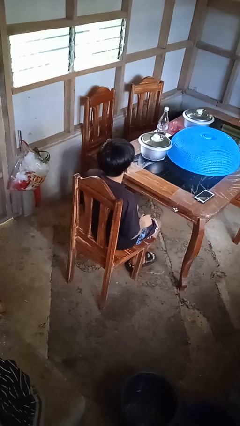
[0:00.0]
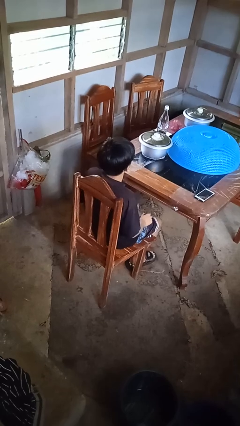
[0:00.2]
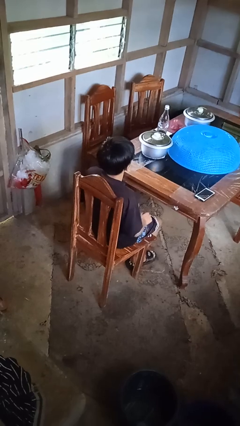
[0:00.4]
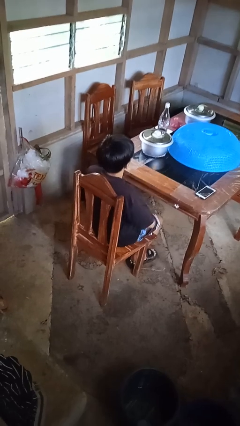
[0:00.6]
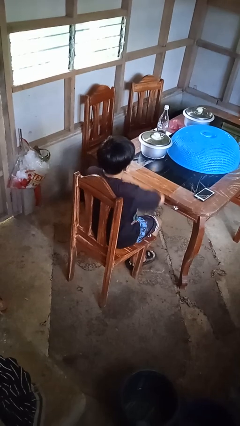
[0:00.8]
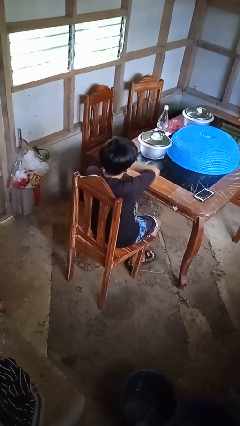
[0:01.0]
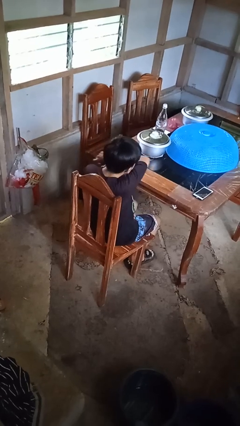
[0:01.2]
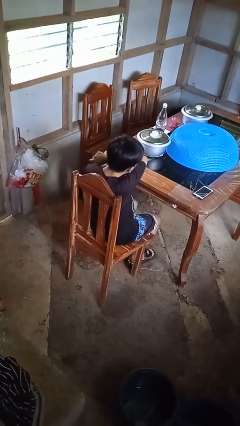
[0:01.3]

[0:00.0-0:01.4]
person sneezes into arm

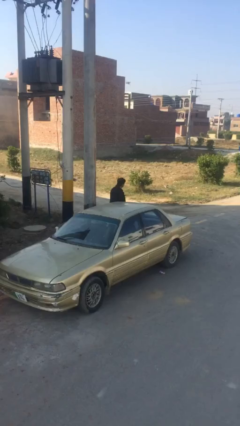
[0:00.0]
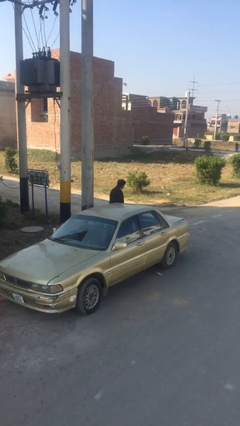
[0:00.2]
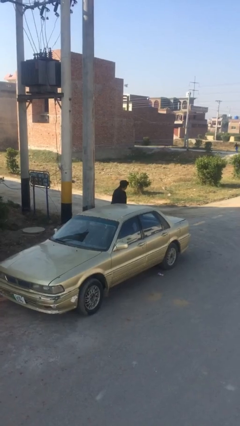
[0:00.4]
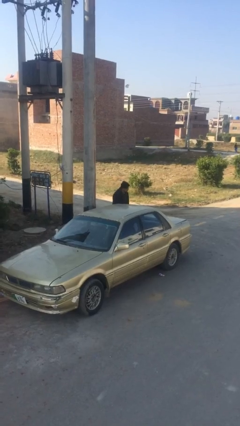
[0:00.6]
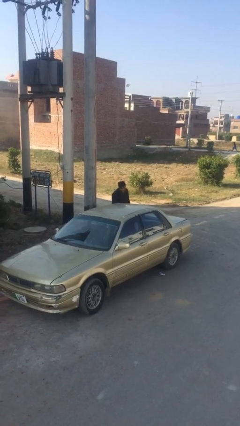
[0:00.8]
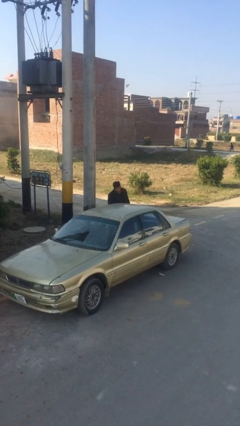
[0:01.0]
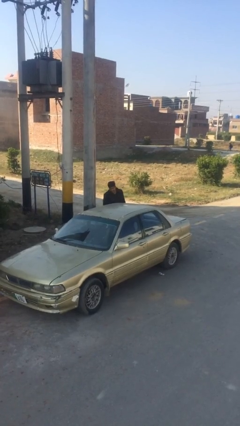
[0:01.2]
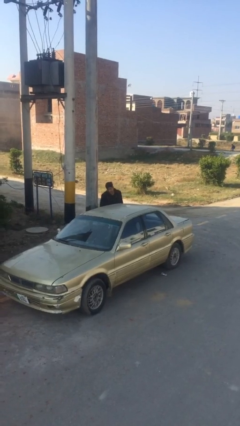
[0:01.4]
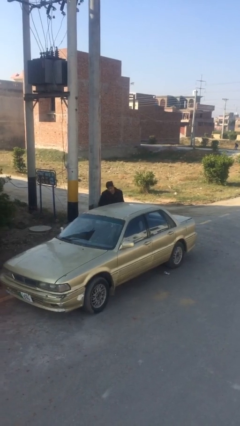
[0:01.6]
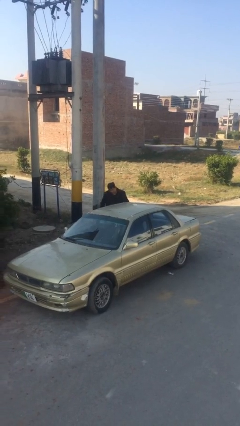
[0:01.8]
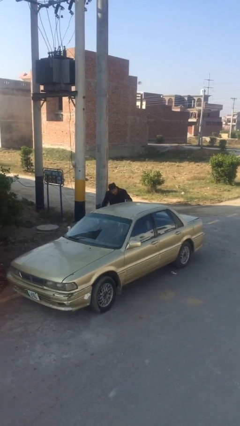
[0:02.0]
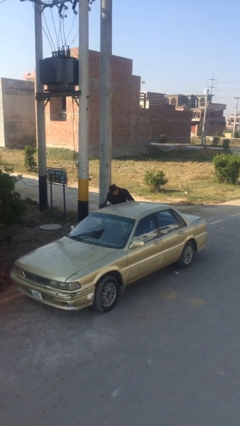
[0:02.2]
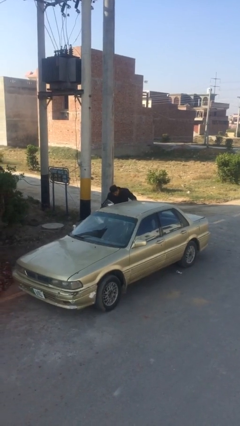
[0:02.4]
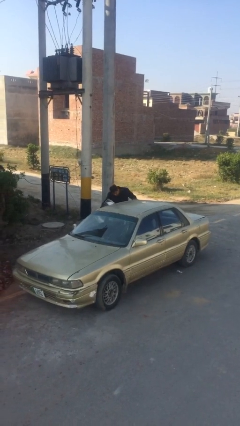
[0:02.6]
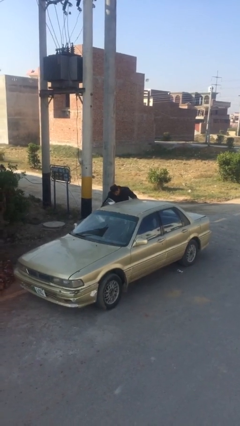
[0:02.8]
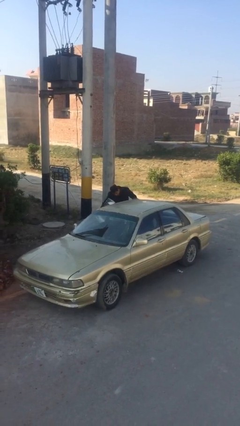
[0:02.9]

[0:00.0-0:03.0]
person opens car door

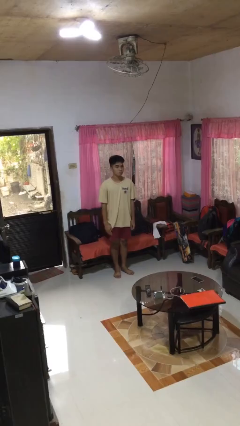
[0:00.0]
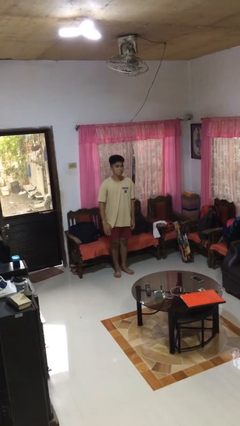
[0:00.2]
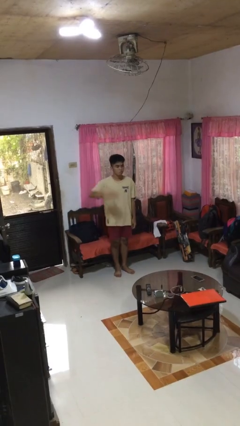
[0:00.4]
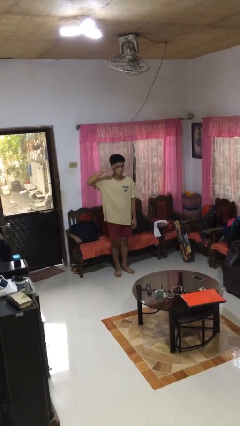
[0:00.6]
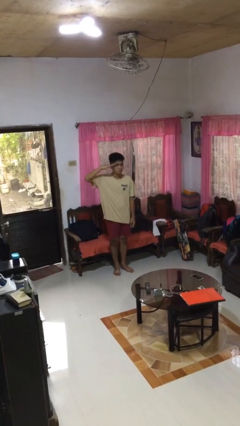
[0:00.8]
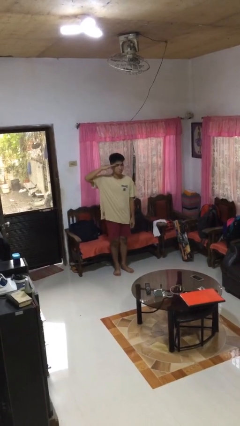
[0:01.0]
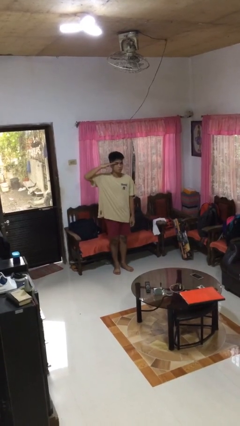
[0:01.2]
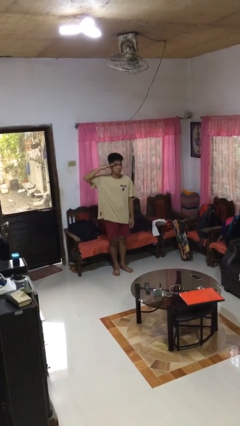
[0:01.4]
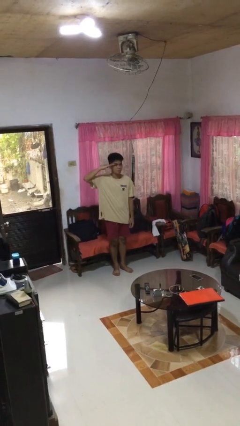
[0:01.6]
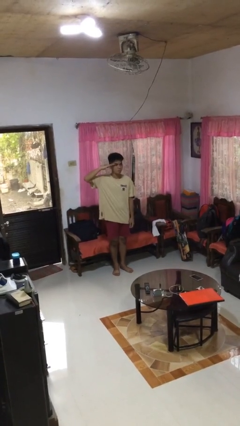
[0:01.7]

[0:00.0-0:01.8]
person salutes

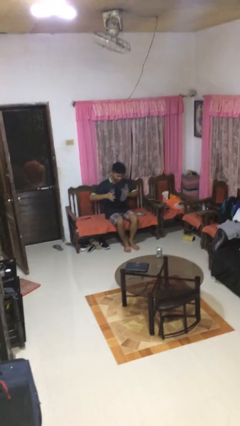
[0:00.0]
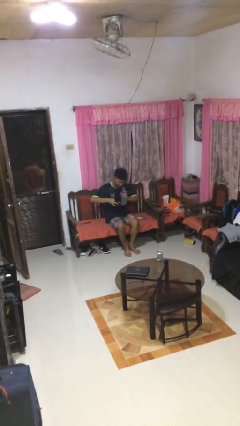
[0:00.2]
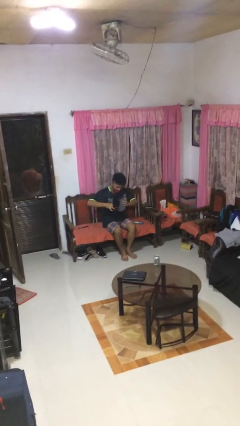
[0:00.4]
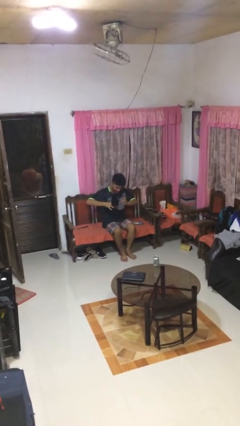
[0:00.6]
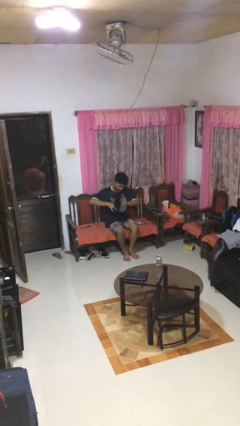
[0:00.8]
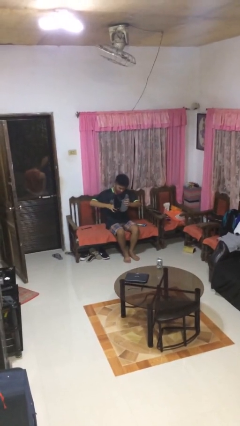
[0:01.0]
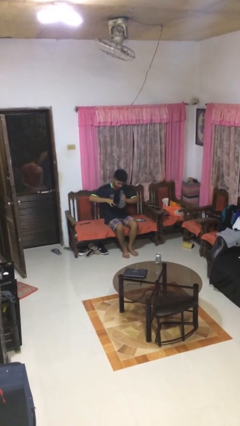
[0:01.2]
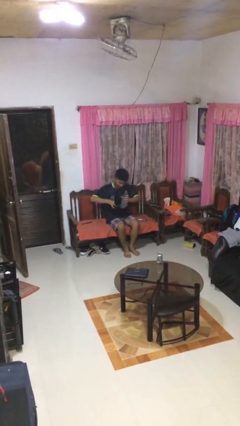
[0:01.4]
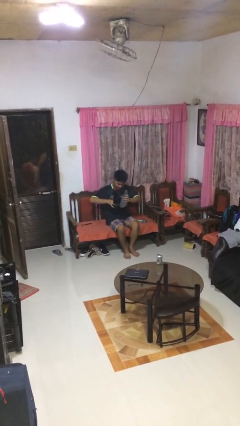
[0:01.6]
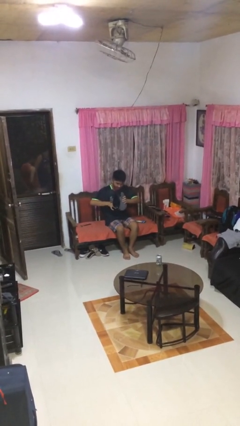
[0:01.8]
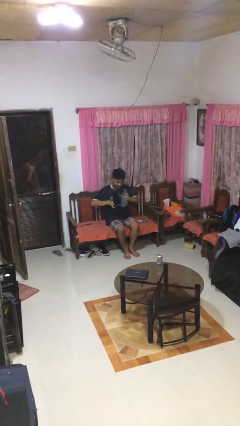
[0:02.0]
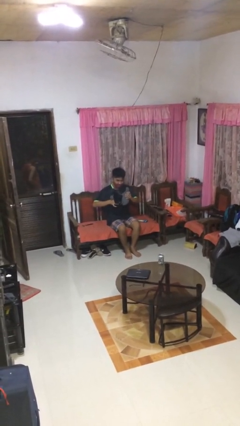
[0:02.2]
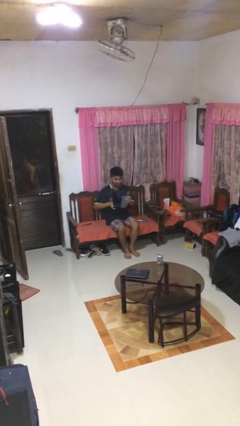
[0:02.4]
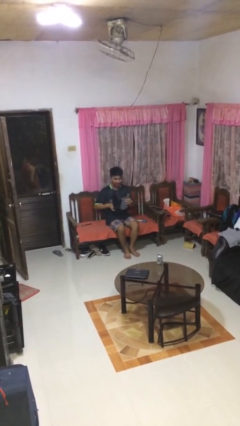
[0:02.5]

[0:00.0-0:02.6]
person squeezes object

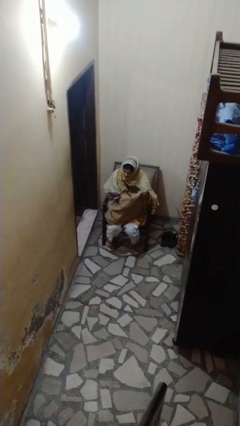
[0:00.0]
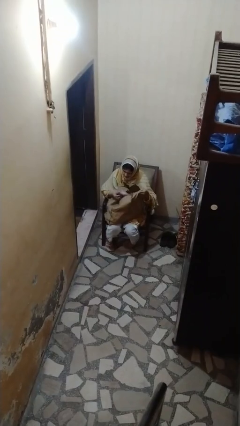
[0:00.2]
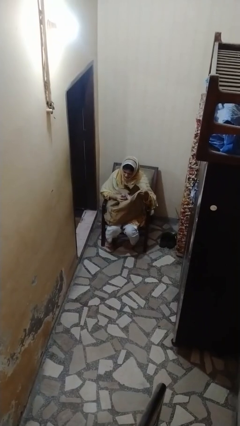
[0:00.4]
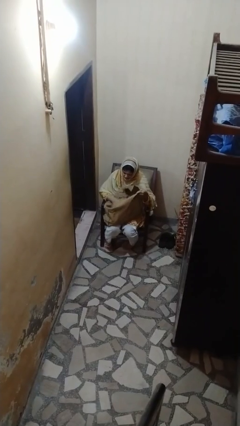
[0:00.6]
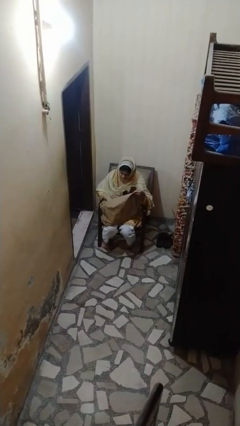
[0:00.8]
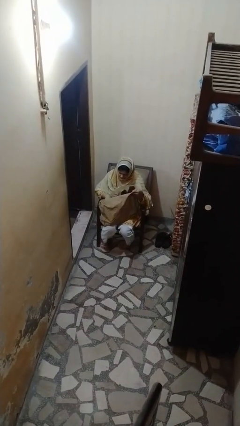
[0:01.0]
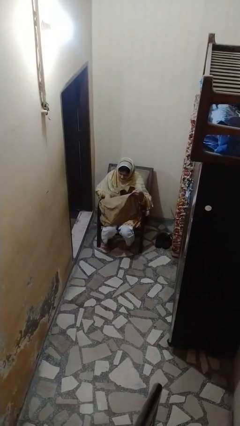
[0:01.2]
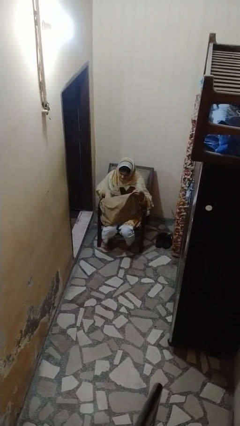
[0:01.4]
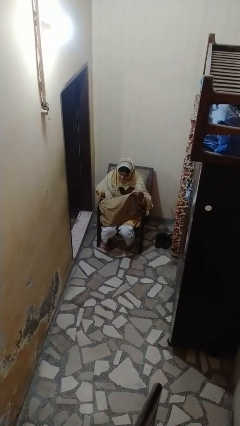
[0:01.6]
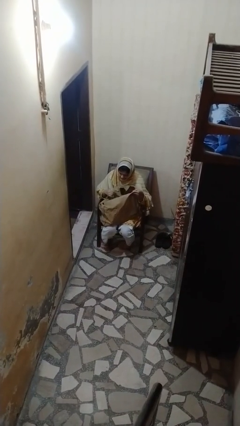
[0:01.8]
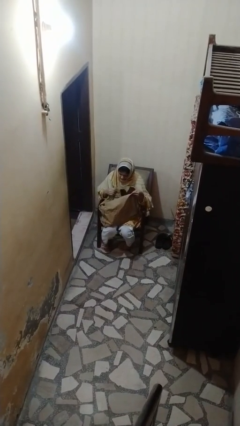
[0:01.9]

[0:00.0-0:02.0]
person puts object into bag

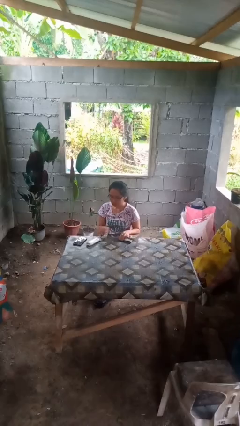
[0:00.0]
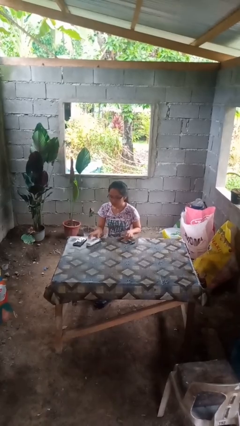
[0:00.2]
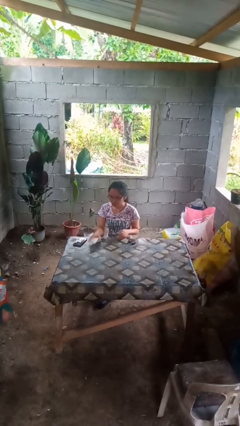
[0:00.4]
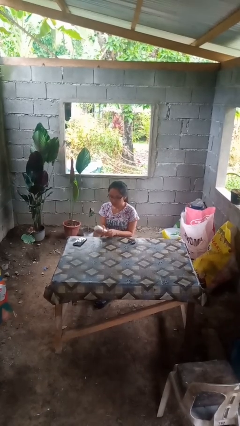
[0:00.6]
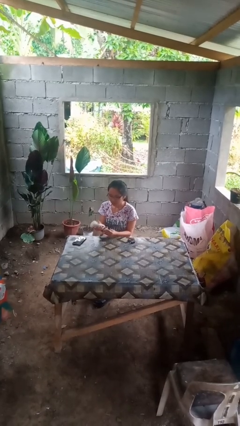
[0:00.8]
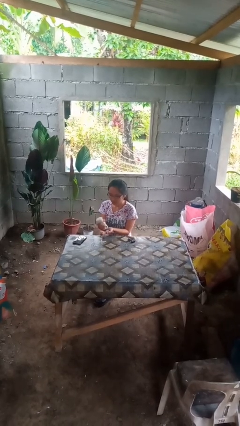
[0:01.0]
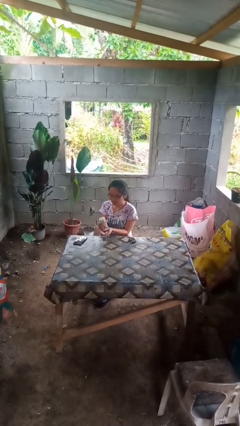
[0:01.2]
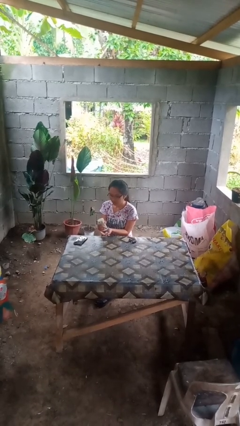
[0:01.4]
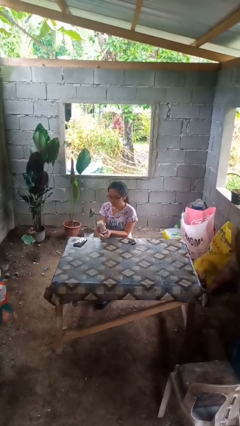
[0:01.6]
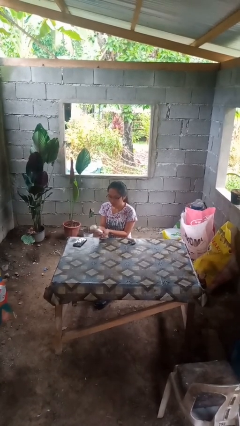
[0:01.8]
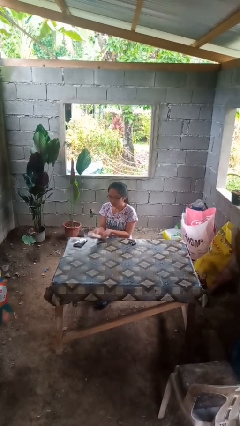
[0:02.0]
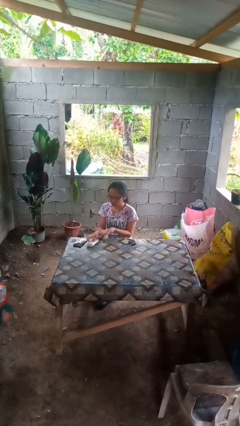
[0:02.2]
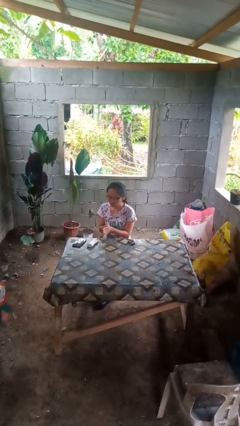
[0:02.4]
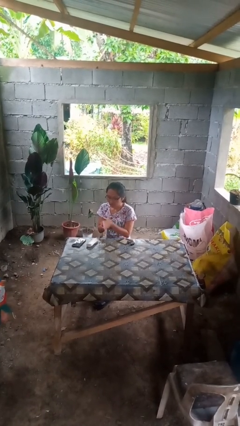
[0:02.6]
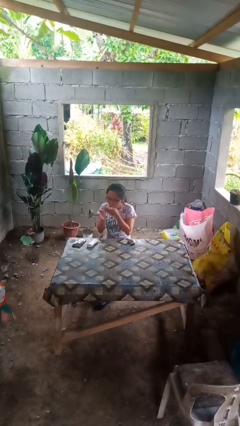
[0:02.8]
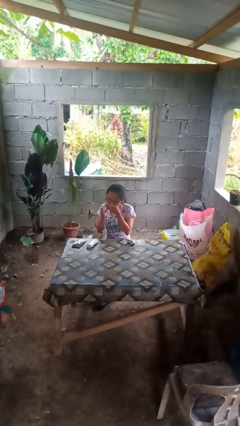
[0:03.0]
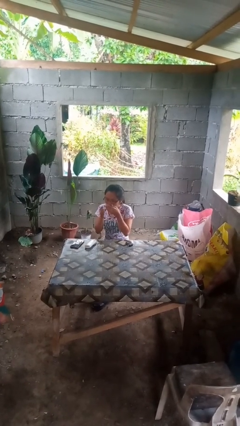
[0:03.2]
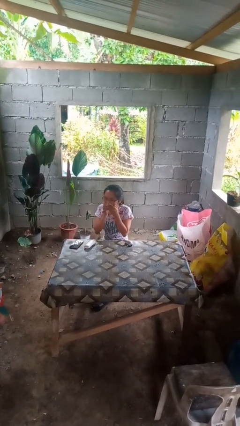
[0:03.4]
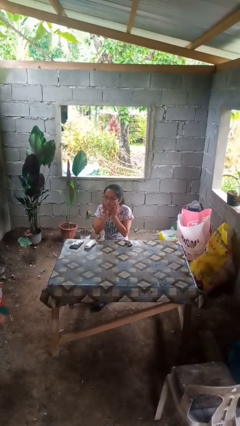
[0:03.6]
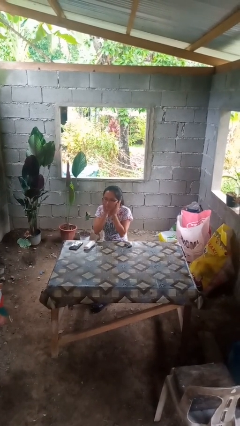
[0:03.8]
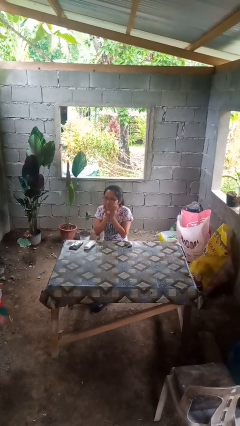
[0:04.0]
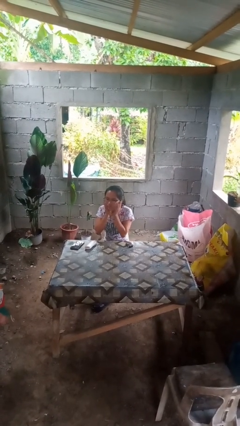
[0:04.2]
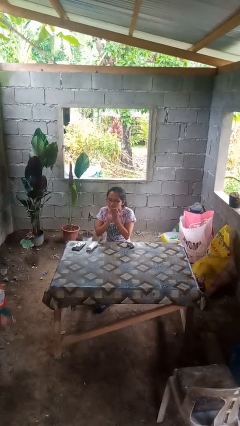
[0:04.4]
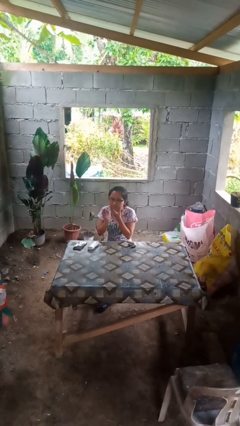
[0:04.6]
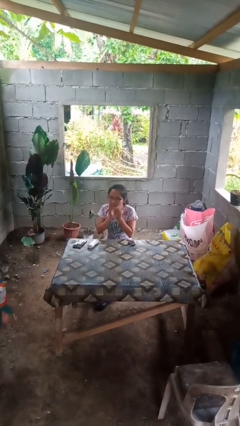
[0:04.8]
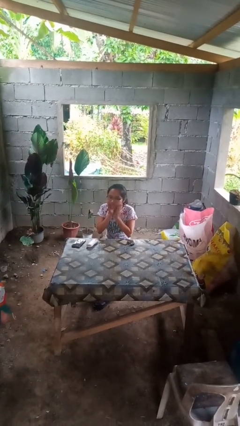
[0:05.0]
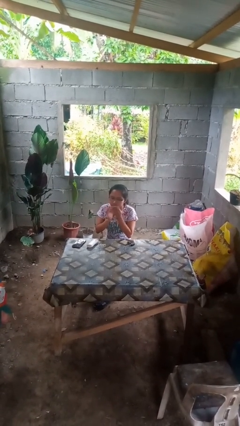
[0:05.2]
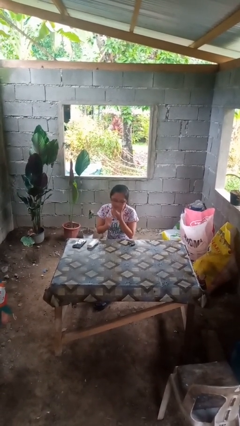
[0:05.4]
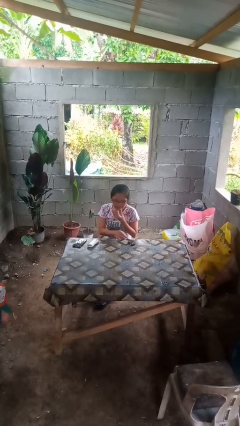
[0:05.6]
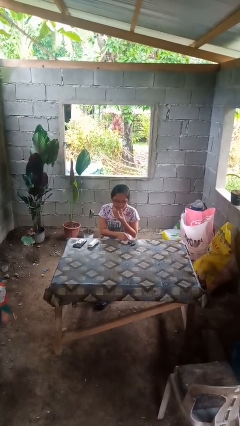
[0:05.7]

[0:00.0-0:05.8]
person applies shaving cream

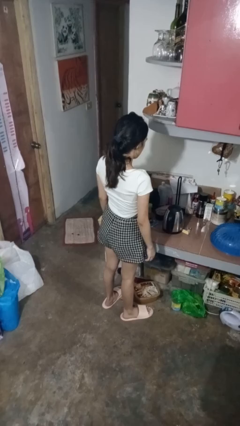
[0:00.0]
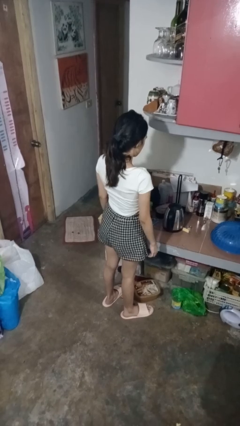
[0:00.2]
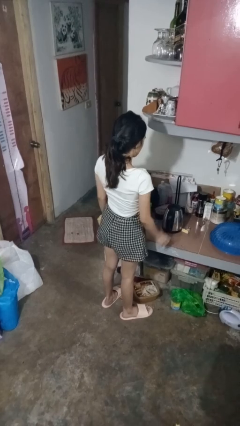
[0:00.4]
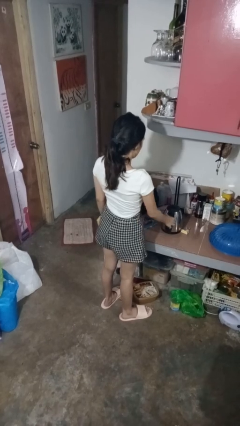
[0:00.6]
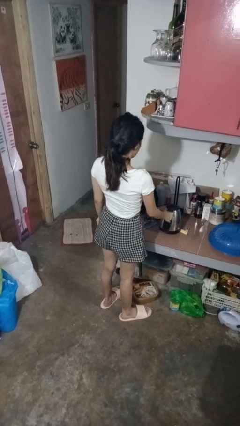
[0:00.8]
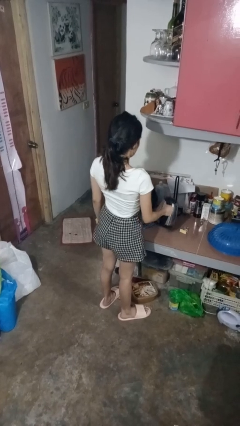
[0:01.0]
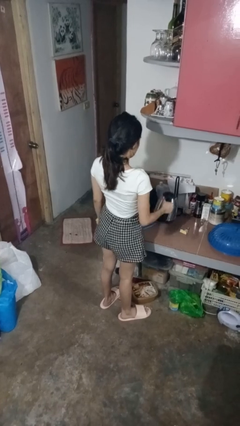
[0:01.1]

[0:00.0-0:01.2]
person picks up object from countertop
